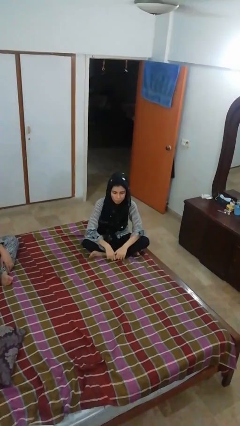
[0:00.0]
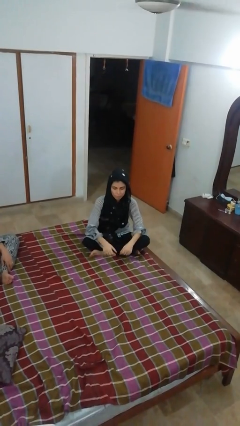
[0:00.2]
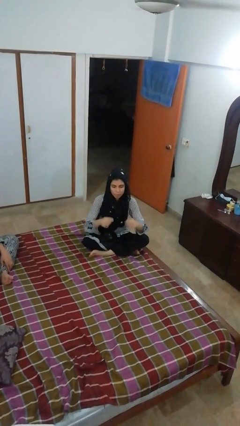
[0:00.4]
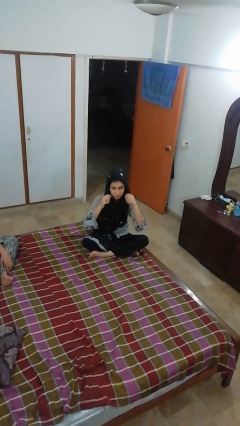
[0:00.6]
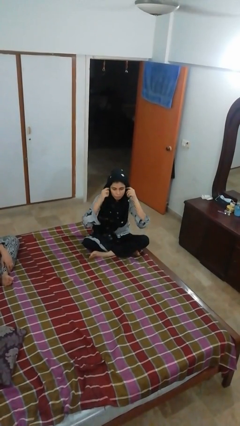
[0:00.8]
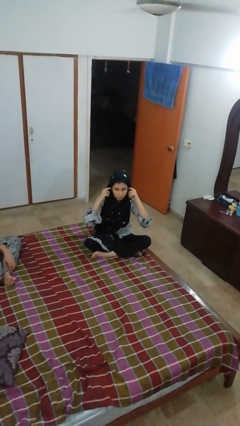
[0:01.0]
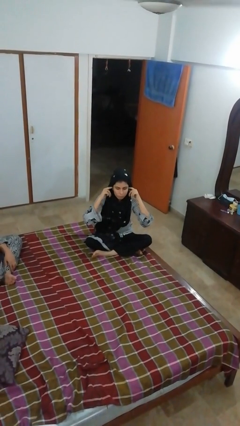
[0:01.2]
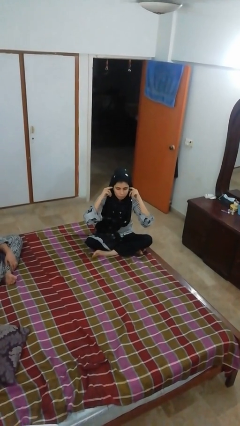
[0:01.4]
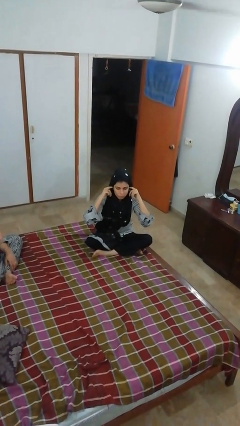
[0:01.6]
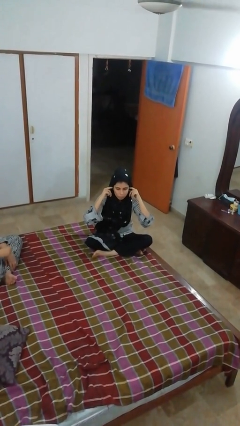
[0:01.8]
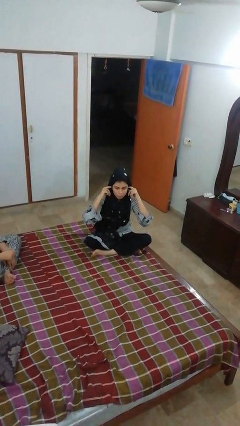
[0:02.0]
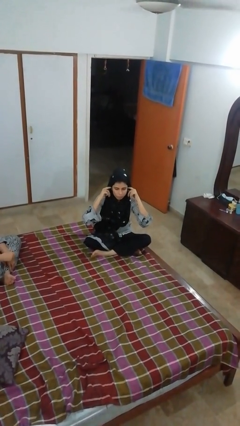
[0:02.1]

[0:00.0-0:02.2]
person puts fingers in ear

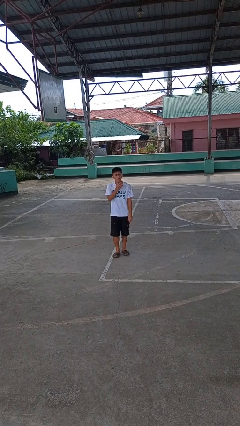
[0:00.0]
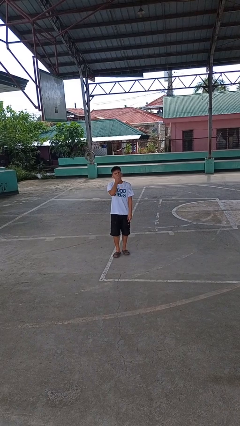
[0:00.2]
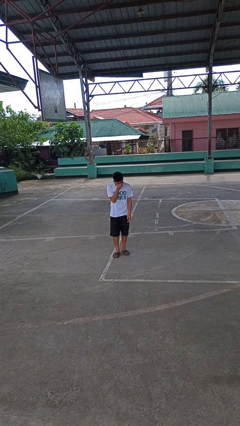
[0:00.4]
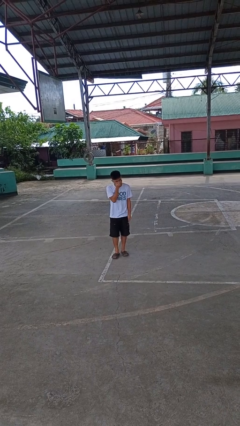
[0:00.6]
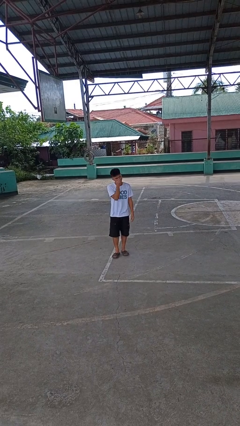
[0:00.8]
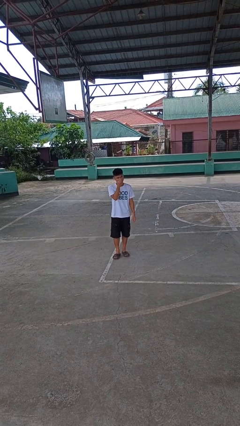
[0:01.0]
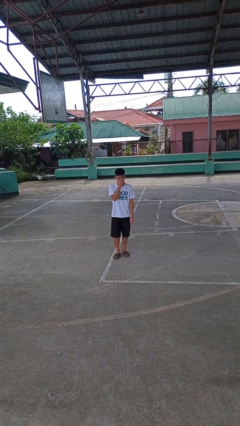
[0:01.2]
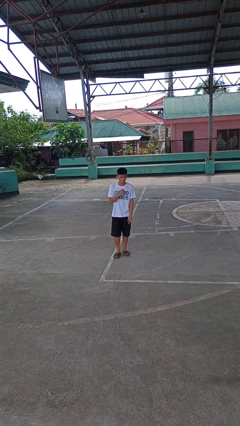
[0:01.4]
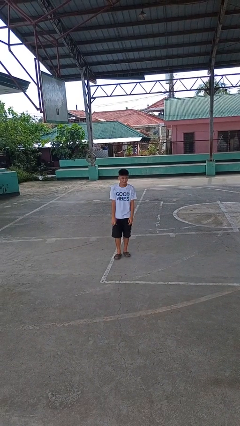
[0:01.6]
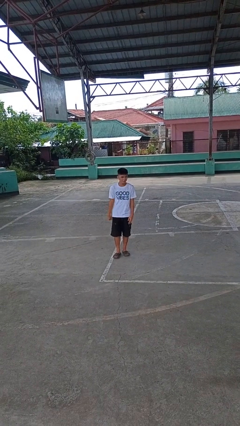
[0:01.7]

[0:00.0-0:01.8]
person sneezes into hand

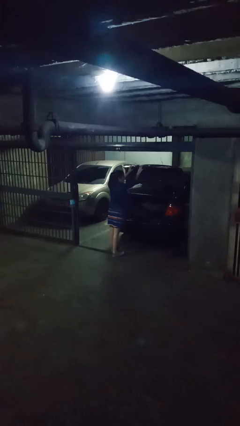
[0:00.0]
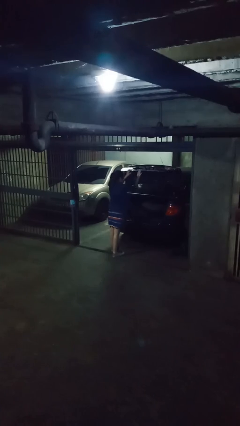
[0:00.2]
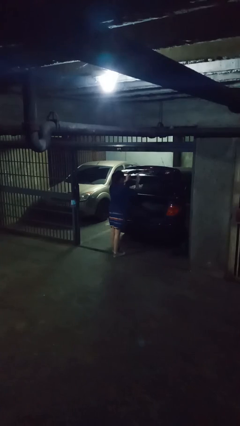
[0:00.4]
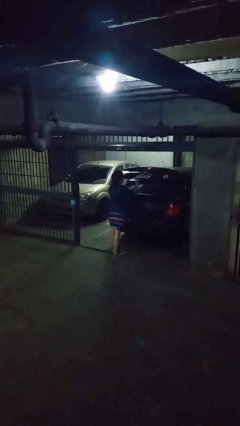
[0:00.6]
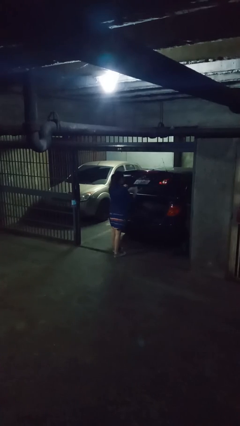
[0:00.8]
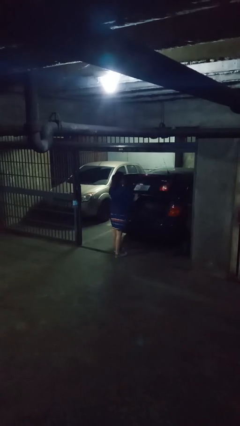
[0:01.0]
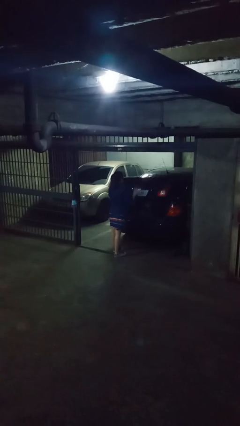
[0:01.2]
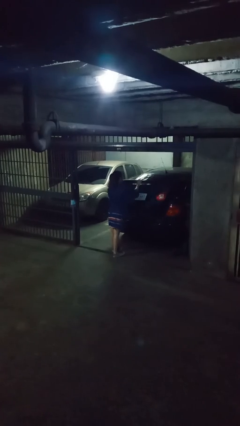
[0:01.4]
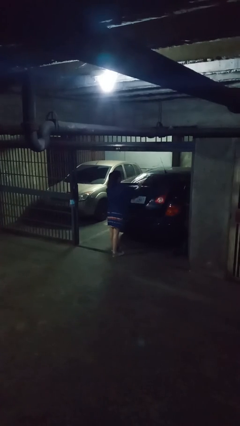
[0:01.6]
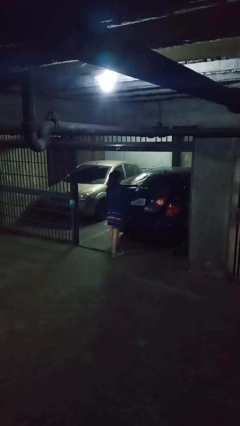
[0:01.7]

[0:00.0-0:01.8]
person closes car trunk

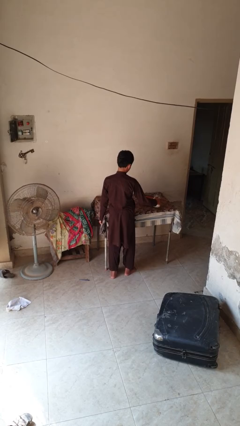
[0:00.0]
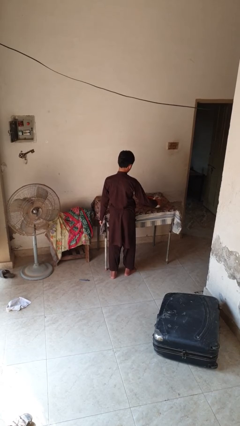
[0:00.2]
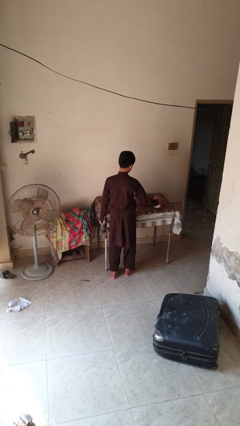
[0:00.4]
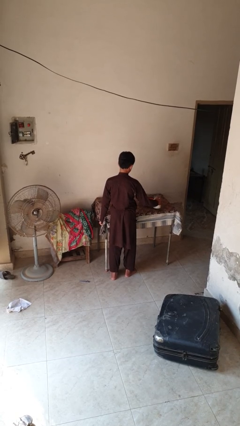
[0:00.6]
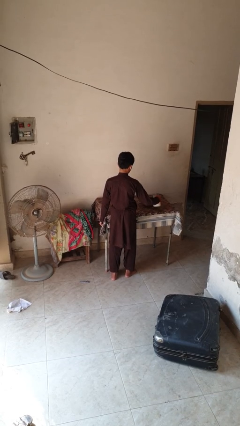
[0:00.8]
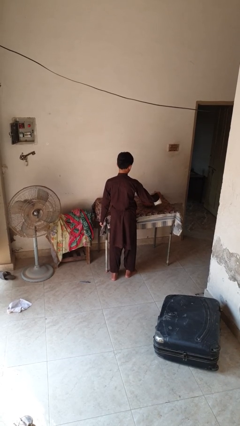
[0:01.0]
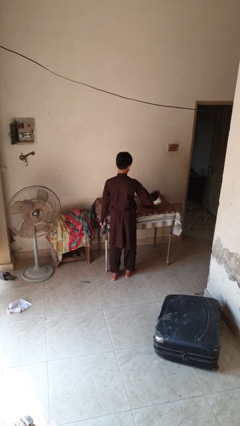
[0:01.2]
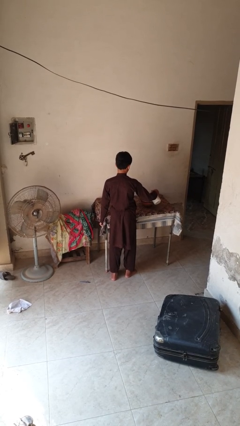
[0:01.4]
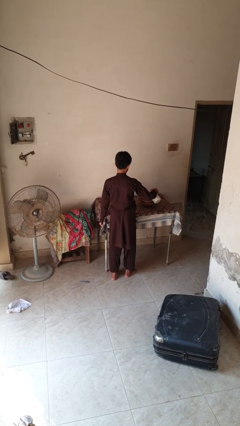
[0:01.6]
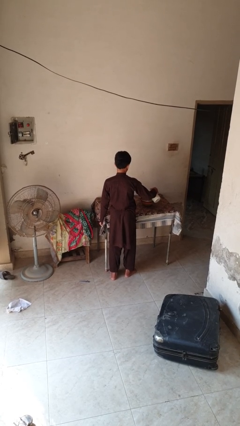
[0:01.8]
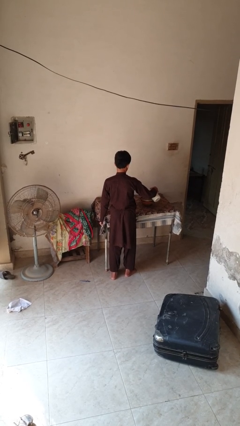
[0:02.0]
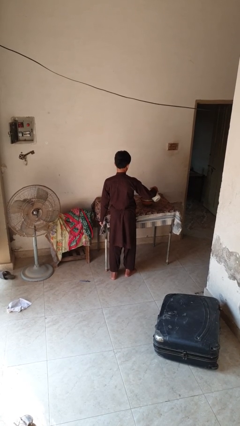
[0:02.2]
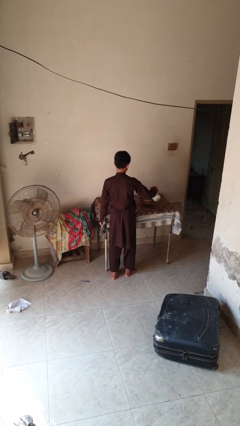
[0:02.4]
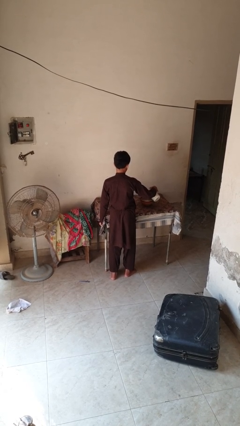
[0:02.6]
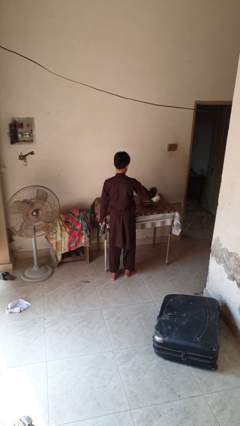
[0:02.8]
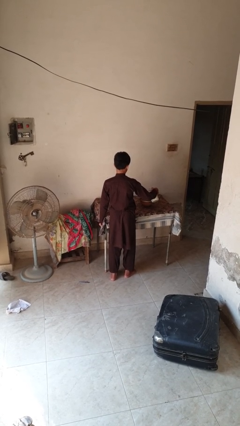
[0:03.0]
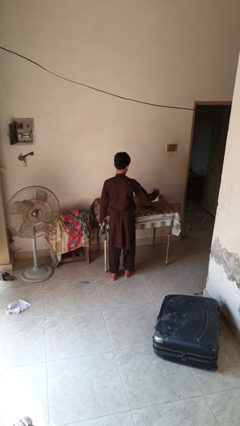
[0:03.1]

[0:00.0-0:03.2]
person pours into bowl

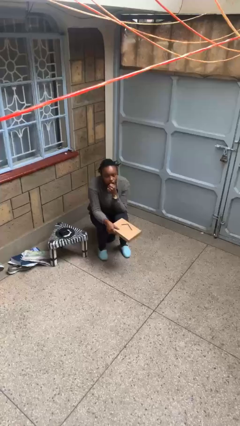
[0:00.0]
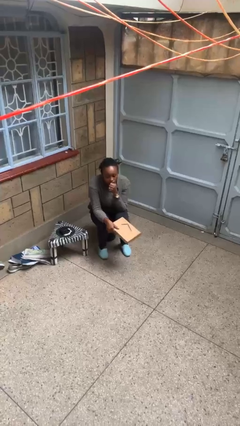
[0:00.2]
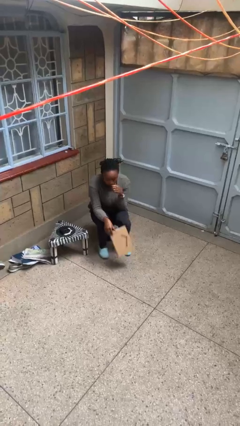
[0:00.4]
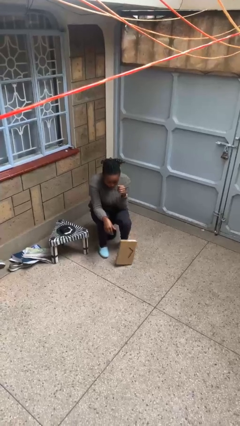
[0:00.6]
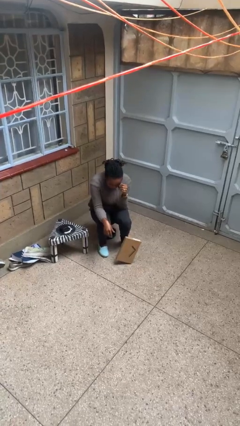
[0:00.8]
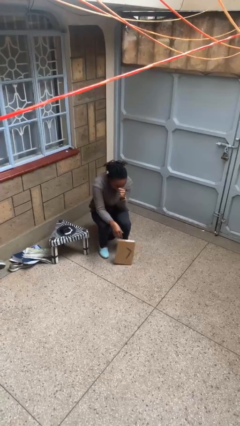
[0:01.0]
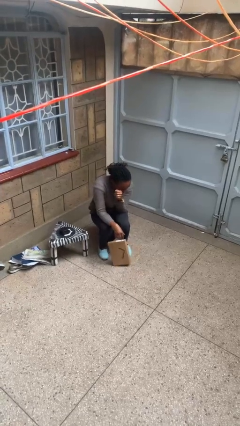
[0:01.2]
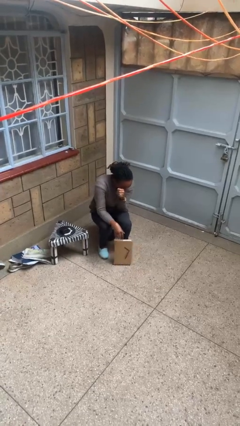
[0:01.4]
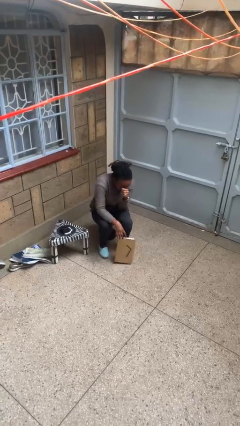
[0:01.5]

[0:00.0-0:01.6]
person drops object

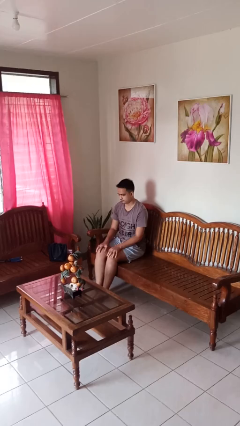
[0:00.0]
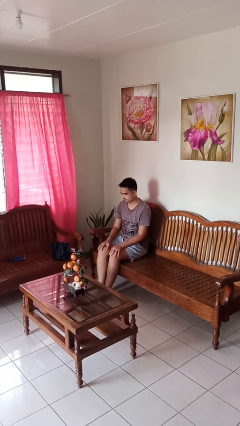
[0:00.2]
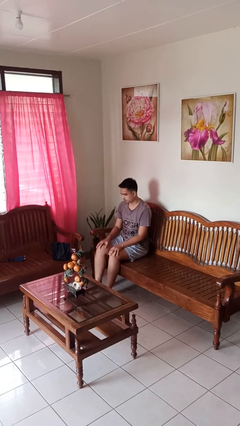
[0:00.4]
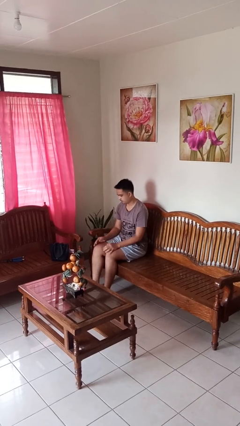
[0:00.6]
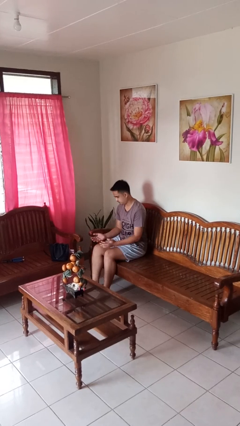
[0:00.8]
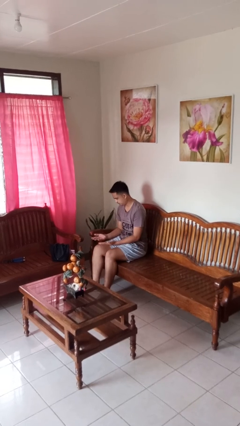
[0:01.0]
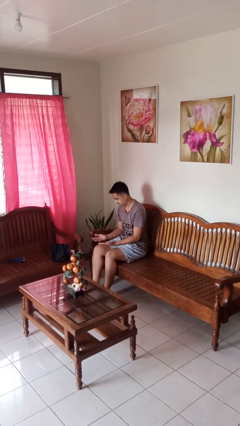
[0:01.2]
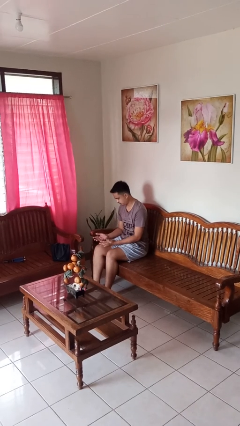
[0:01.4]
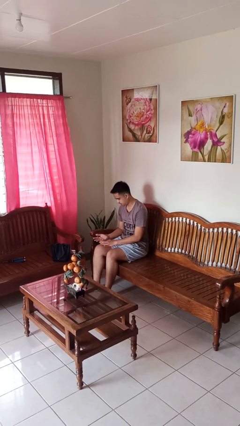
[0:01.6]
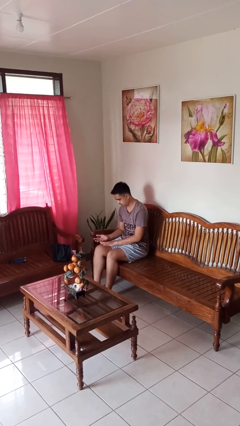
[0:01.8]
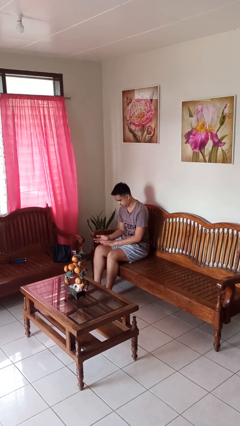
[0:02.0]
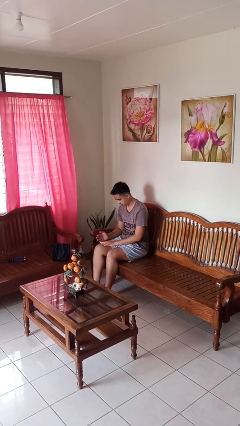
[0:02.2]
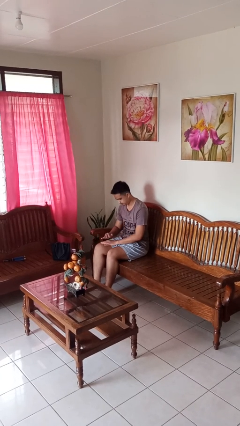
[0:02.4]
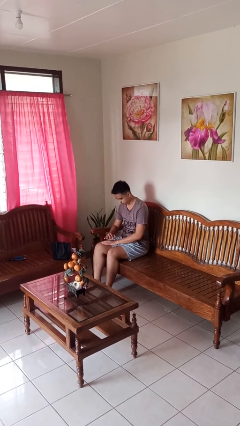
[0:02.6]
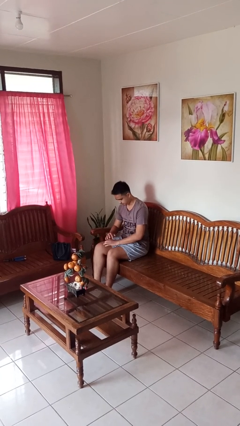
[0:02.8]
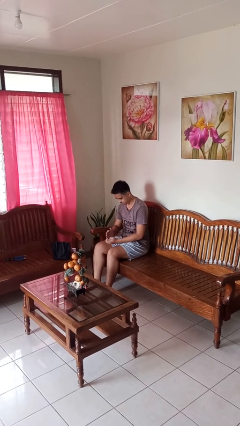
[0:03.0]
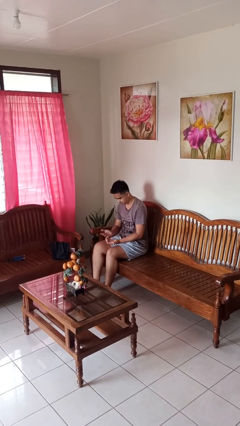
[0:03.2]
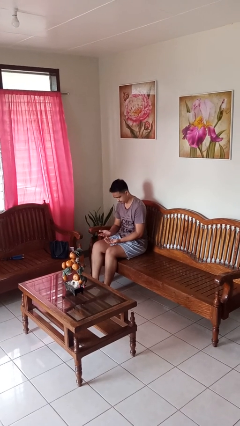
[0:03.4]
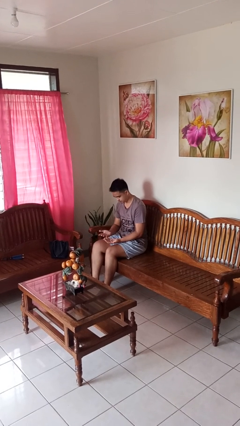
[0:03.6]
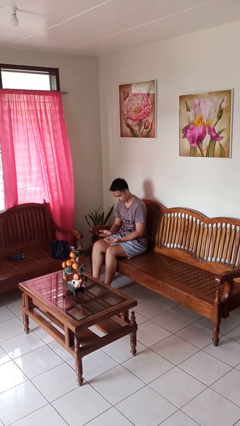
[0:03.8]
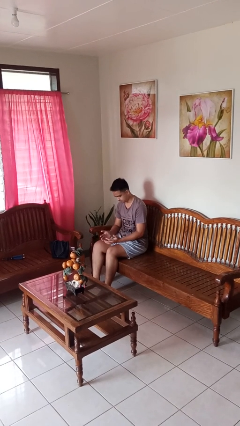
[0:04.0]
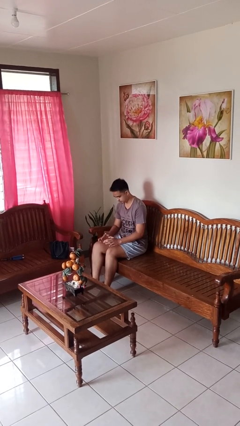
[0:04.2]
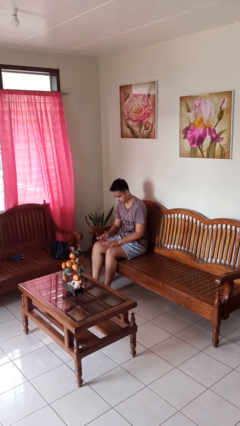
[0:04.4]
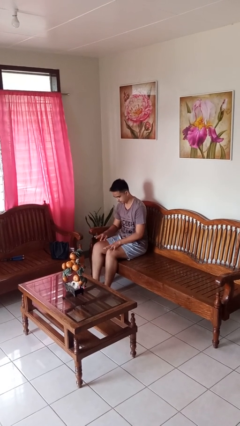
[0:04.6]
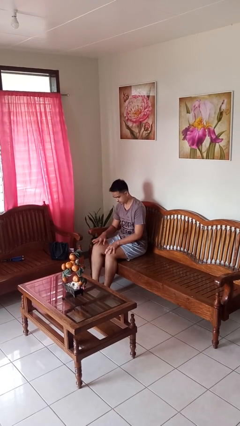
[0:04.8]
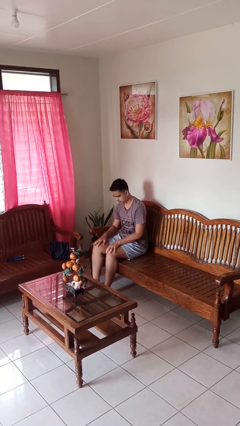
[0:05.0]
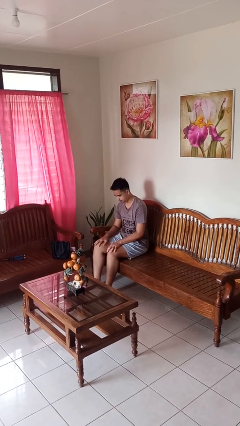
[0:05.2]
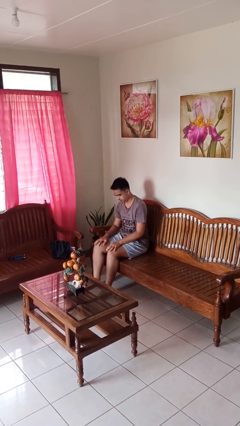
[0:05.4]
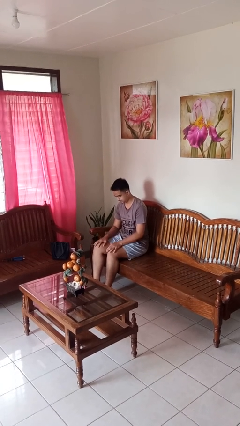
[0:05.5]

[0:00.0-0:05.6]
person looks at hands in lap

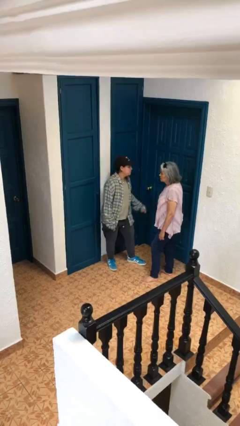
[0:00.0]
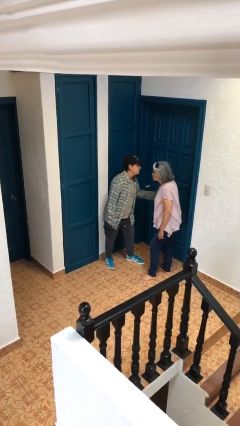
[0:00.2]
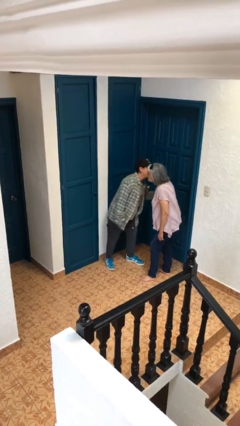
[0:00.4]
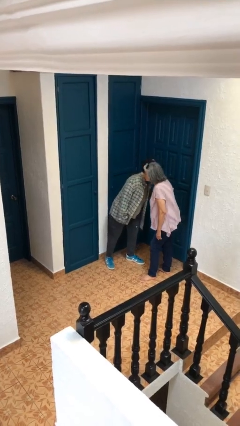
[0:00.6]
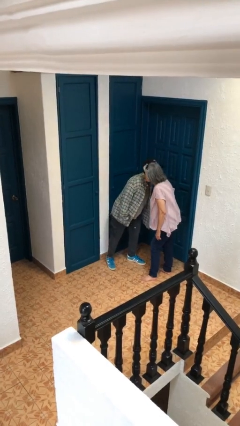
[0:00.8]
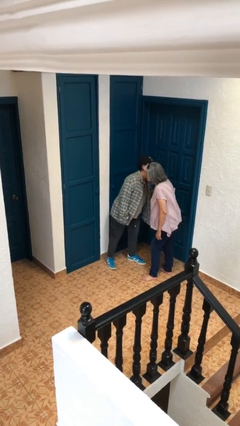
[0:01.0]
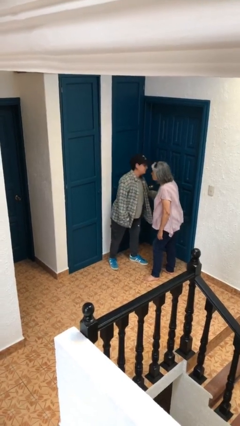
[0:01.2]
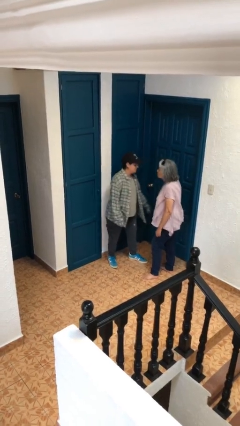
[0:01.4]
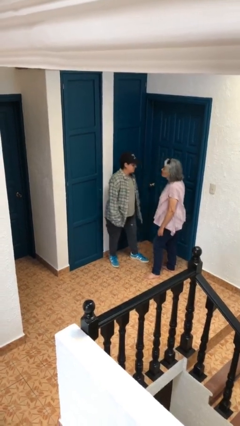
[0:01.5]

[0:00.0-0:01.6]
person kisses cheek of person
